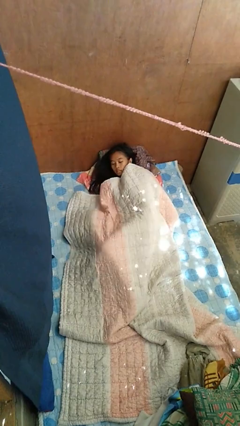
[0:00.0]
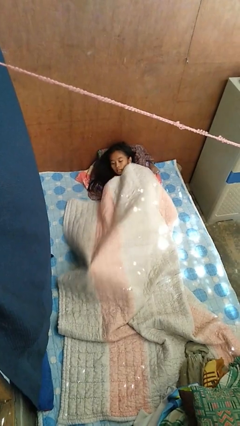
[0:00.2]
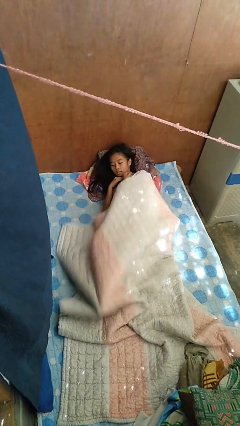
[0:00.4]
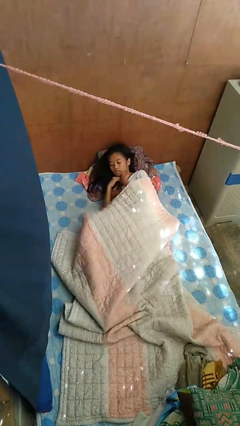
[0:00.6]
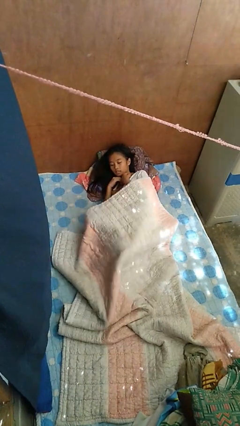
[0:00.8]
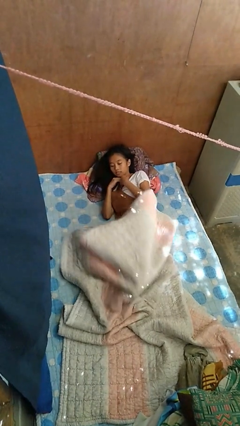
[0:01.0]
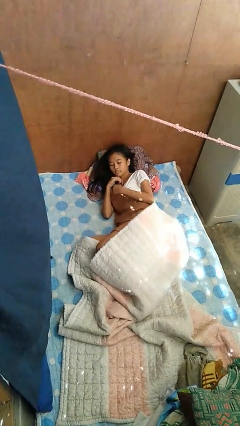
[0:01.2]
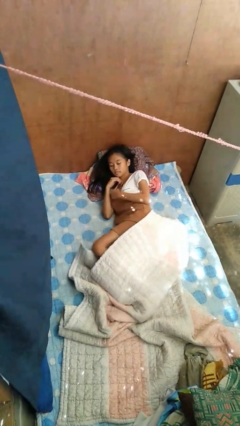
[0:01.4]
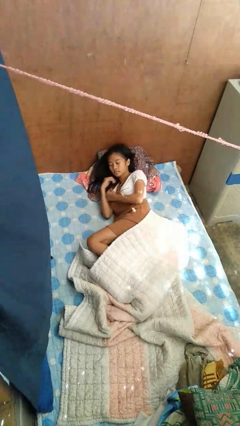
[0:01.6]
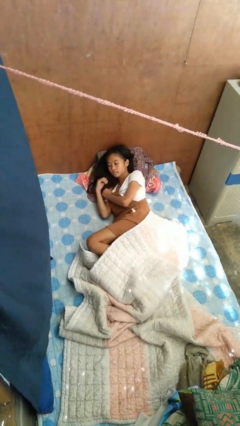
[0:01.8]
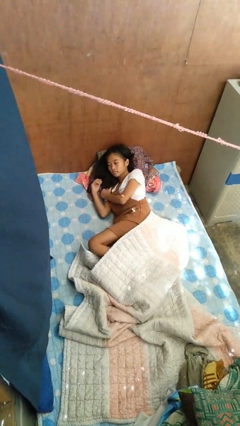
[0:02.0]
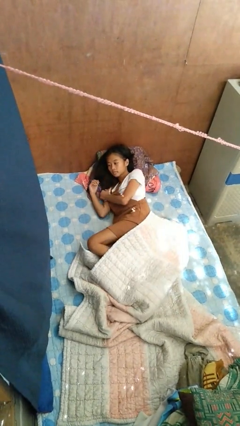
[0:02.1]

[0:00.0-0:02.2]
person uncovers with bedsheets

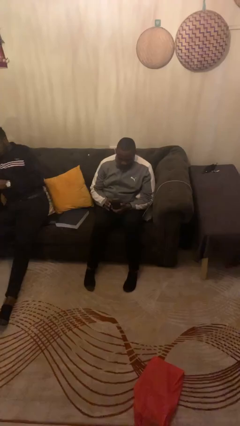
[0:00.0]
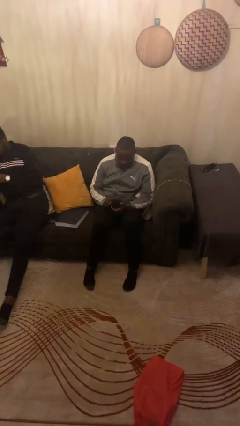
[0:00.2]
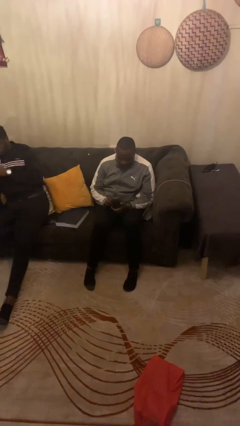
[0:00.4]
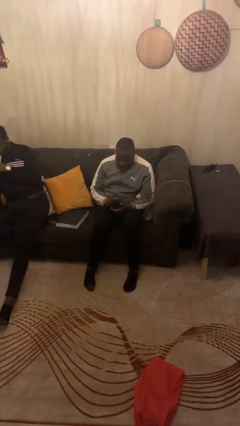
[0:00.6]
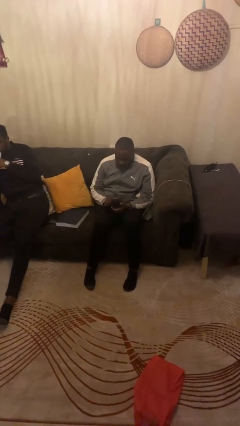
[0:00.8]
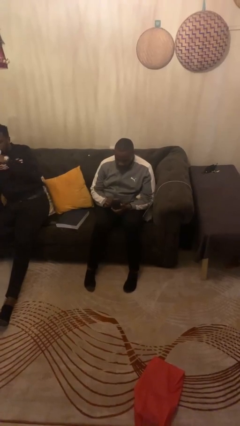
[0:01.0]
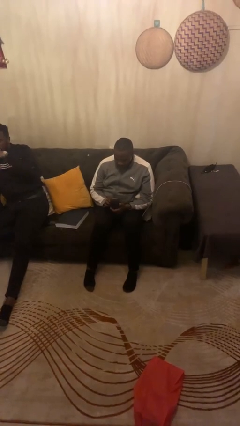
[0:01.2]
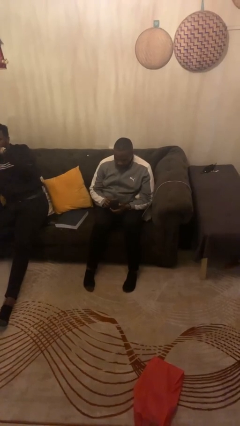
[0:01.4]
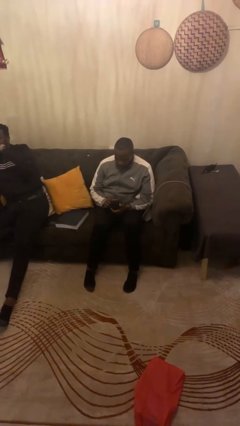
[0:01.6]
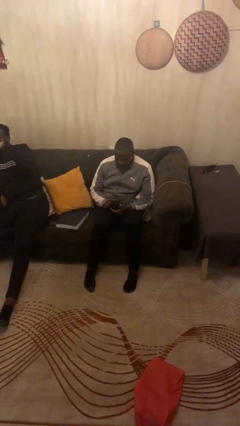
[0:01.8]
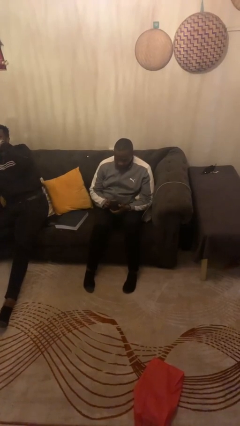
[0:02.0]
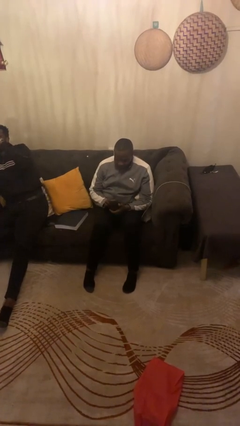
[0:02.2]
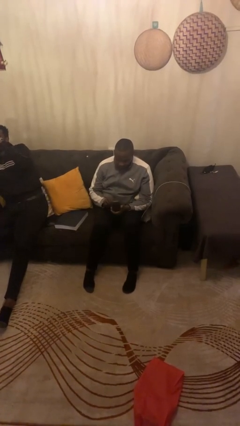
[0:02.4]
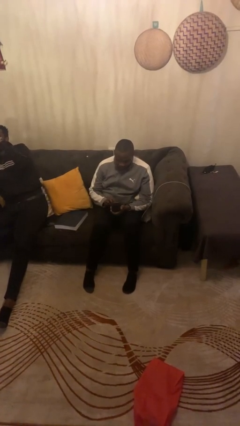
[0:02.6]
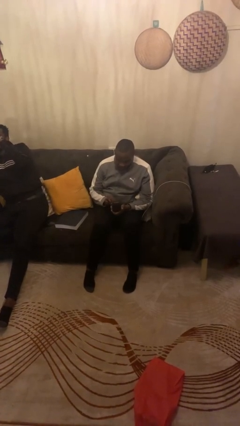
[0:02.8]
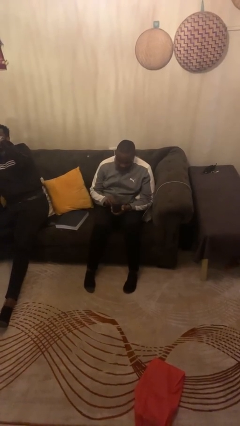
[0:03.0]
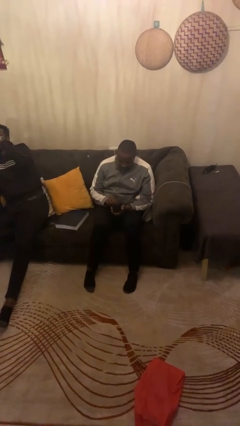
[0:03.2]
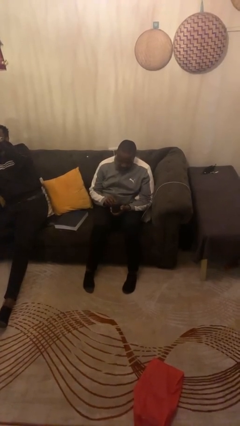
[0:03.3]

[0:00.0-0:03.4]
person searches jewelry box

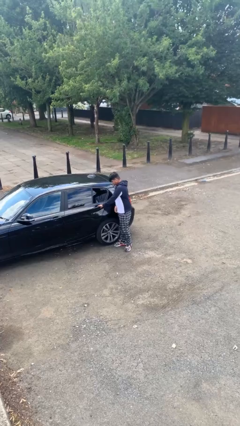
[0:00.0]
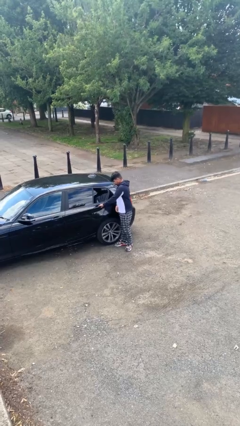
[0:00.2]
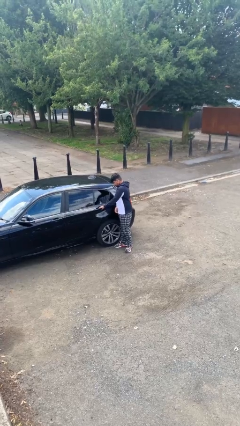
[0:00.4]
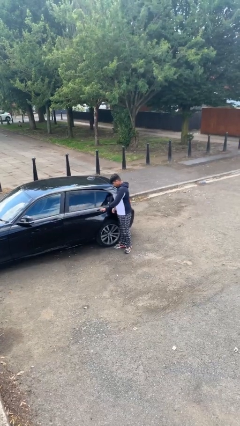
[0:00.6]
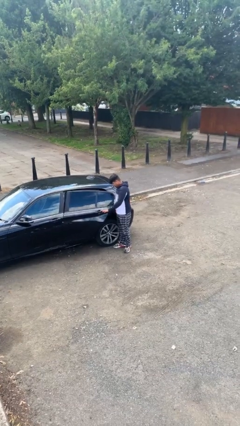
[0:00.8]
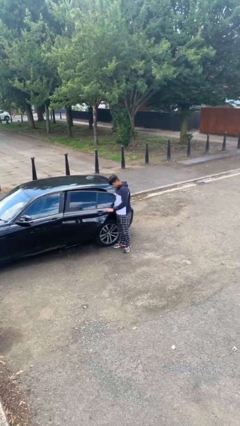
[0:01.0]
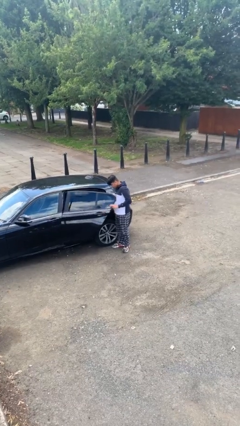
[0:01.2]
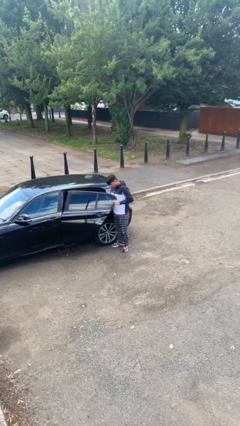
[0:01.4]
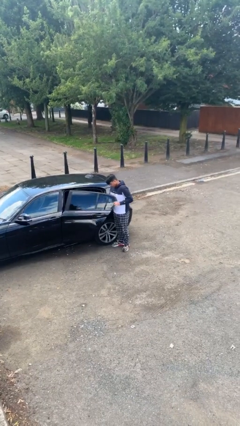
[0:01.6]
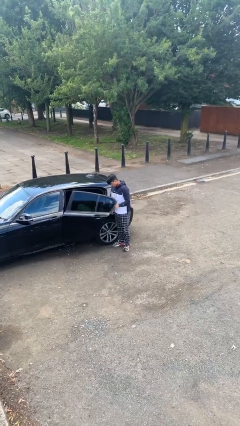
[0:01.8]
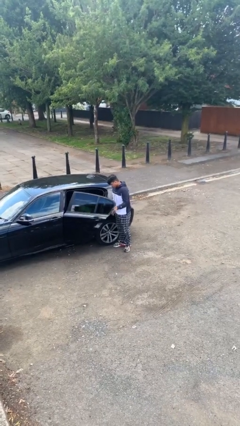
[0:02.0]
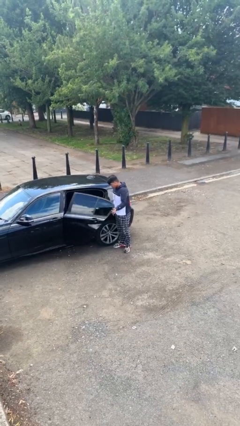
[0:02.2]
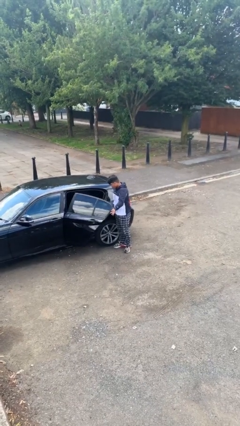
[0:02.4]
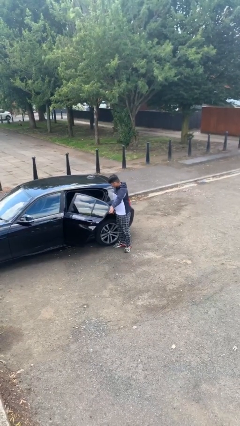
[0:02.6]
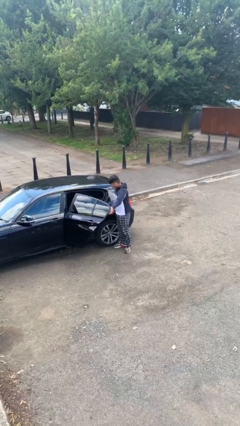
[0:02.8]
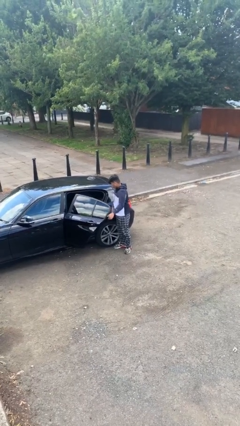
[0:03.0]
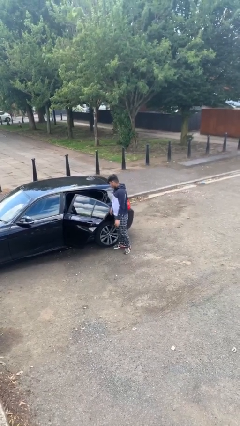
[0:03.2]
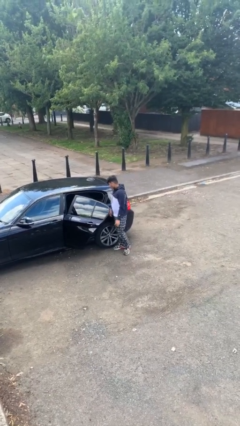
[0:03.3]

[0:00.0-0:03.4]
person opens car door

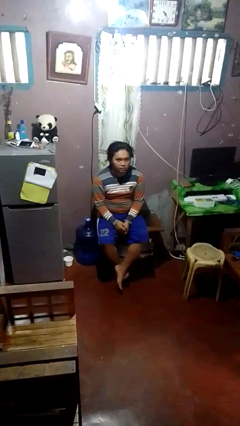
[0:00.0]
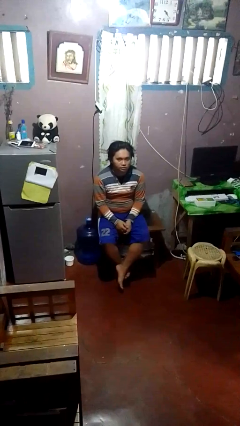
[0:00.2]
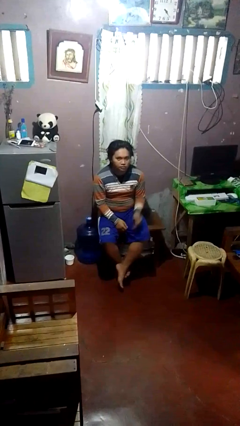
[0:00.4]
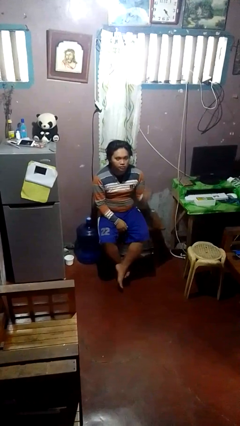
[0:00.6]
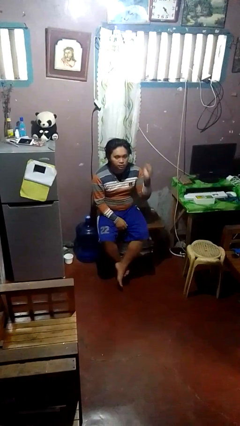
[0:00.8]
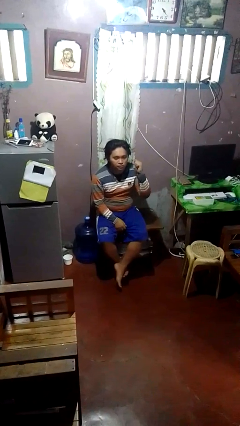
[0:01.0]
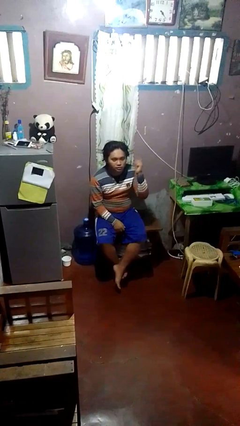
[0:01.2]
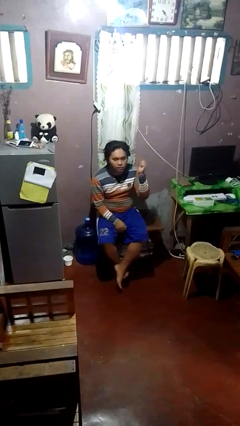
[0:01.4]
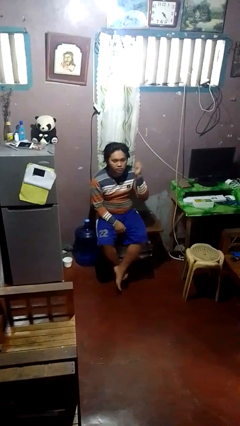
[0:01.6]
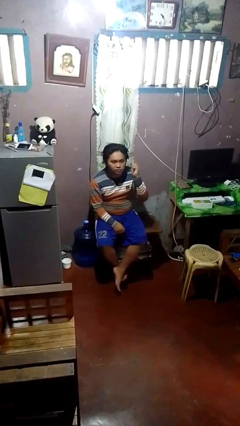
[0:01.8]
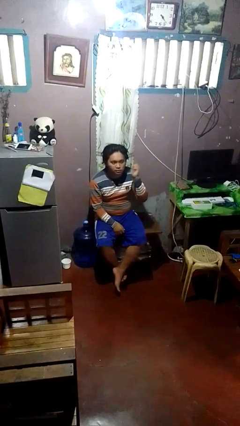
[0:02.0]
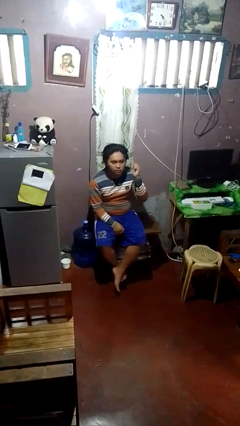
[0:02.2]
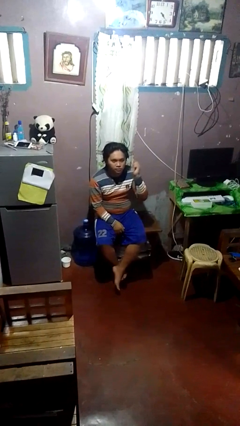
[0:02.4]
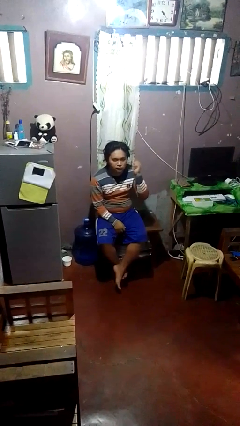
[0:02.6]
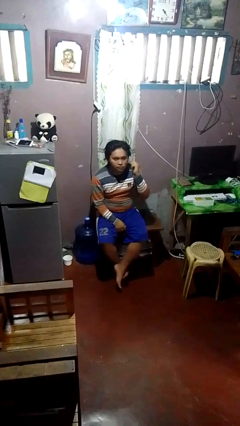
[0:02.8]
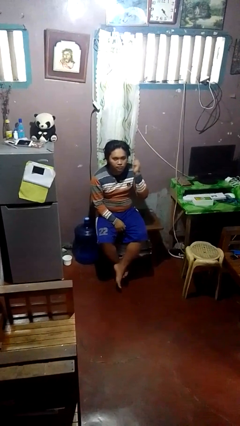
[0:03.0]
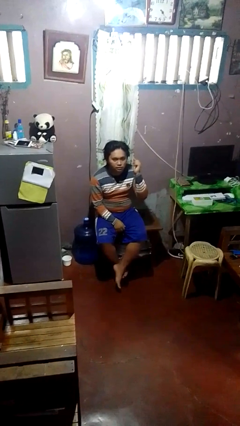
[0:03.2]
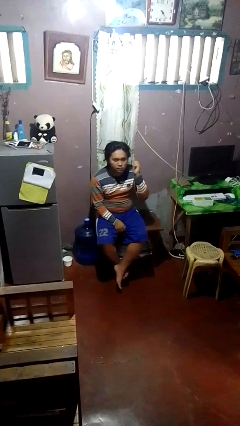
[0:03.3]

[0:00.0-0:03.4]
person gestures listen closely

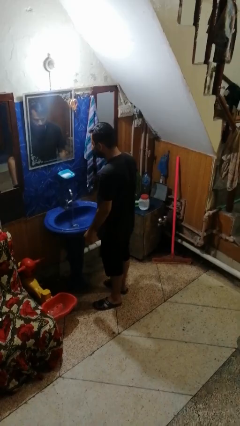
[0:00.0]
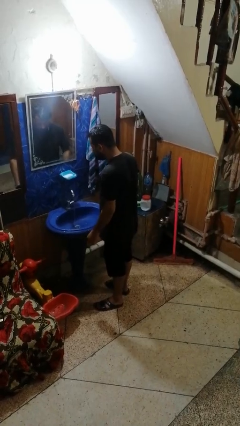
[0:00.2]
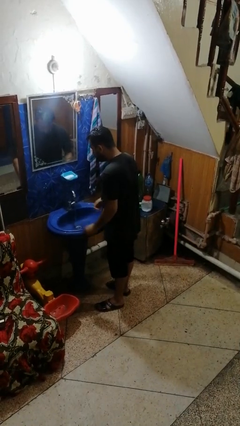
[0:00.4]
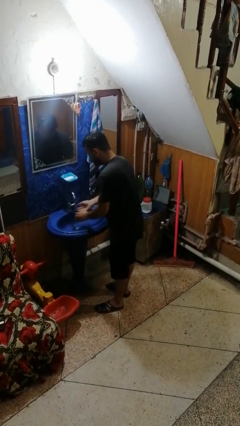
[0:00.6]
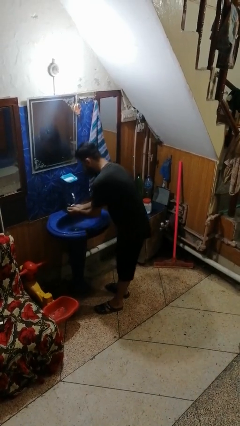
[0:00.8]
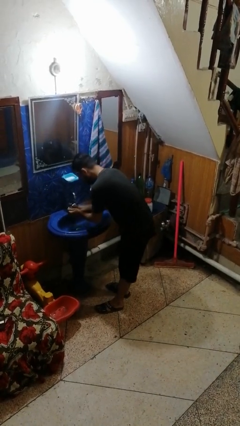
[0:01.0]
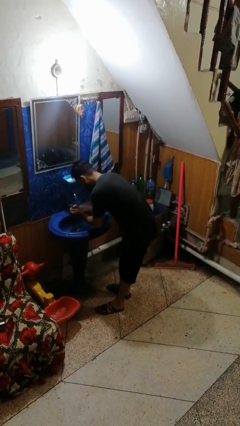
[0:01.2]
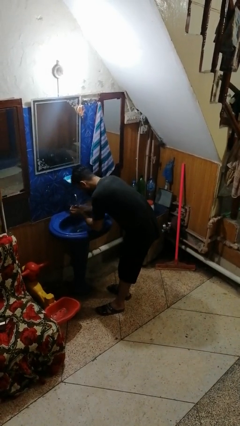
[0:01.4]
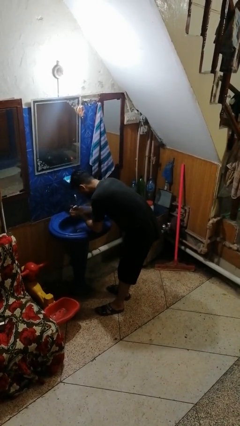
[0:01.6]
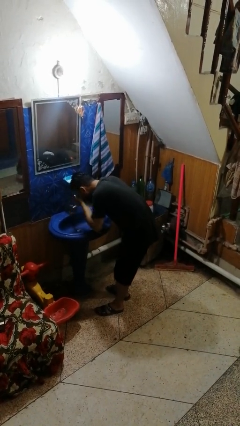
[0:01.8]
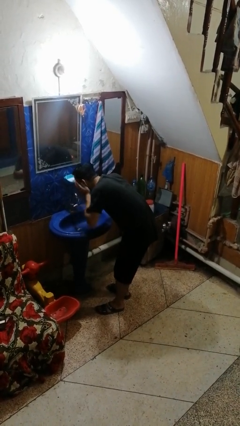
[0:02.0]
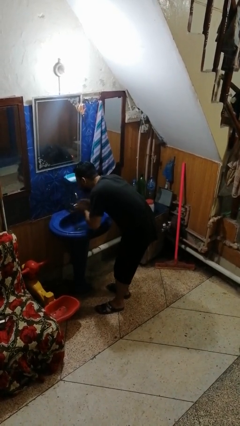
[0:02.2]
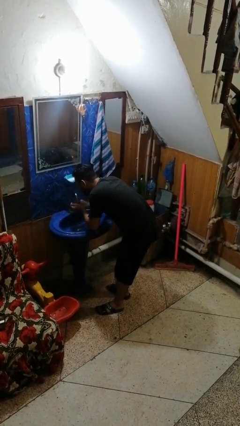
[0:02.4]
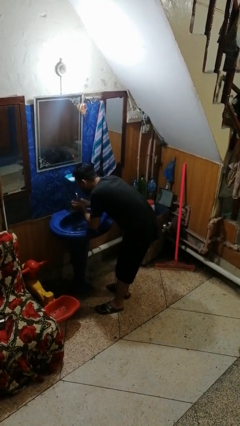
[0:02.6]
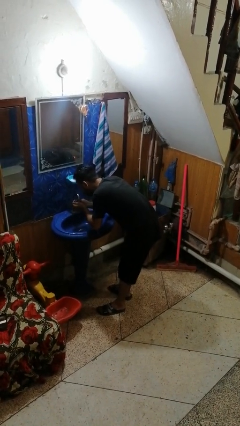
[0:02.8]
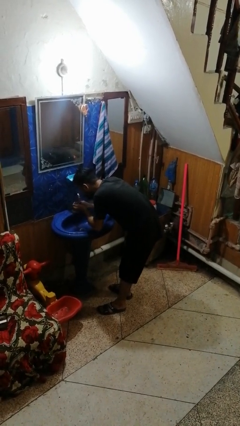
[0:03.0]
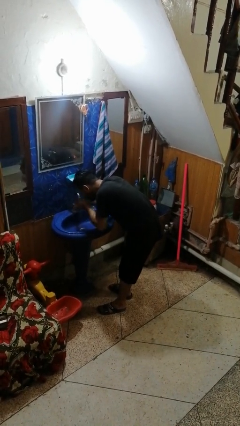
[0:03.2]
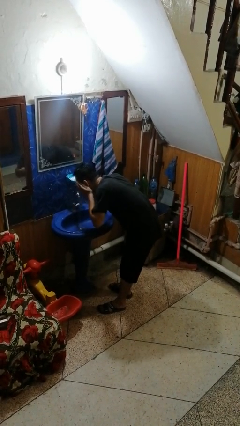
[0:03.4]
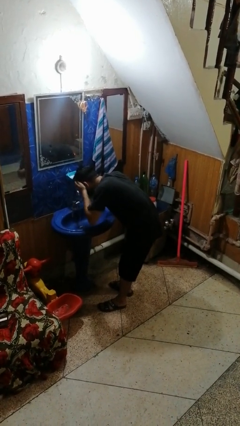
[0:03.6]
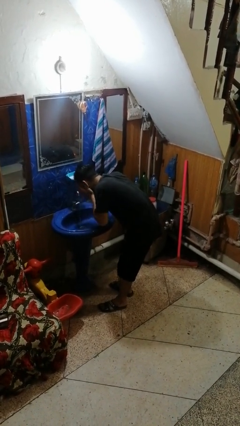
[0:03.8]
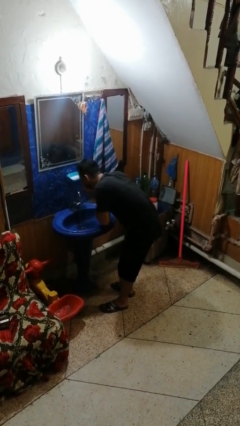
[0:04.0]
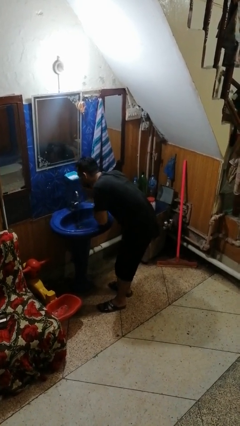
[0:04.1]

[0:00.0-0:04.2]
person washes face

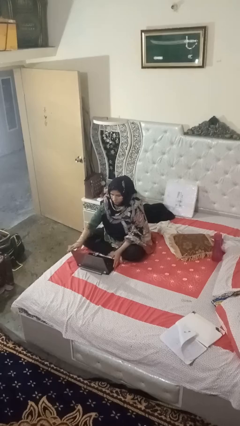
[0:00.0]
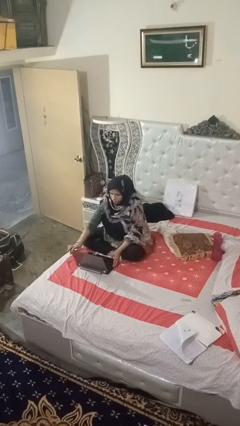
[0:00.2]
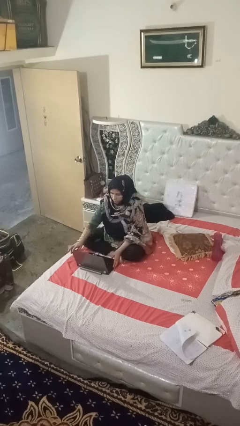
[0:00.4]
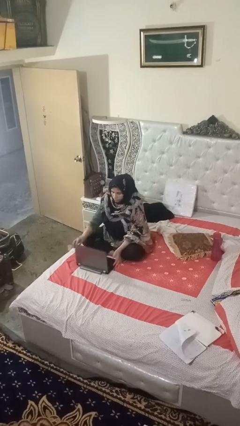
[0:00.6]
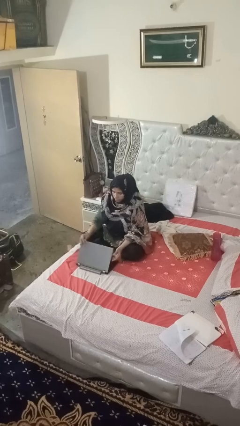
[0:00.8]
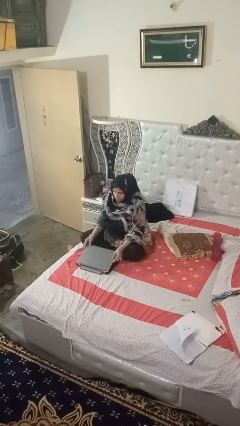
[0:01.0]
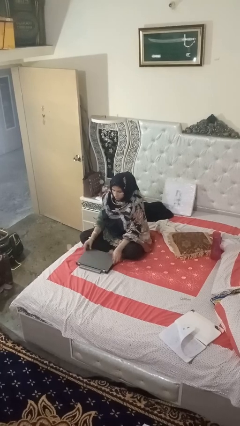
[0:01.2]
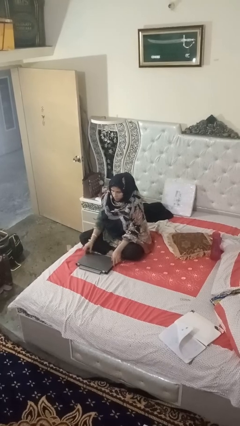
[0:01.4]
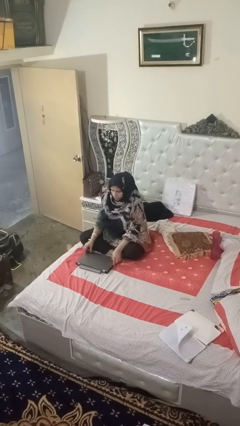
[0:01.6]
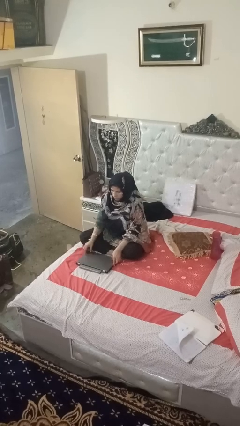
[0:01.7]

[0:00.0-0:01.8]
person closes laptop
